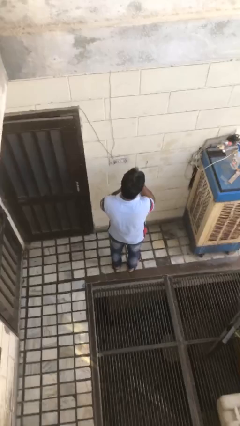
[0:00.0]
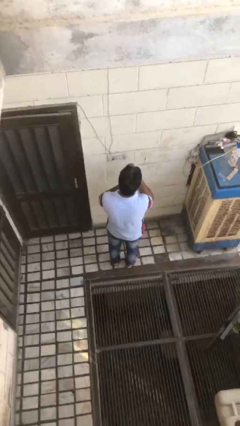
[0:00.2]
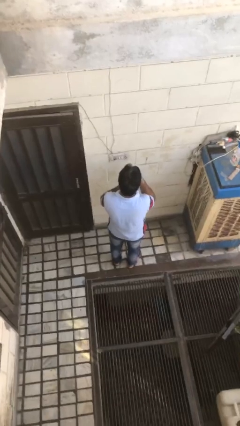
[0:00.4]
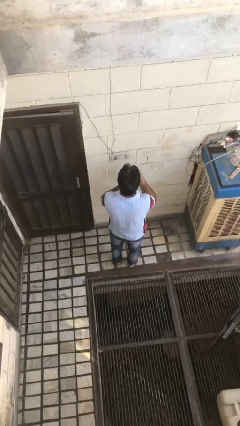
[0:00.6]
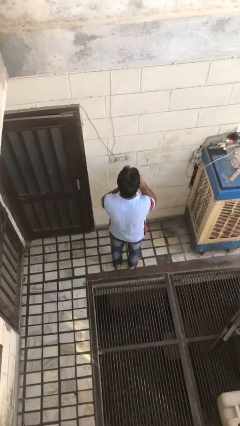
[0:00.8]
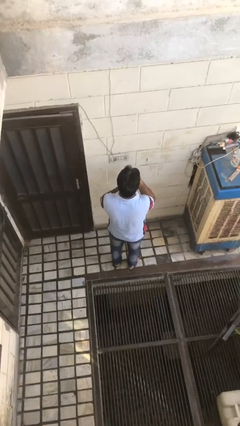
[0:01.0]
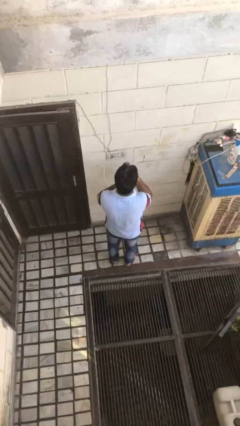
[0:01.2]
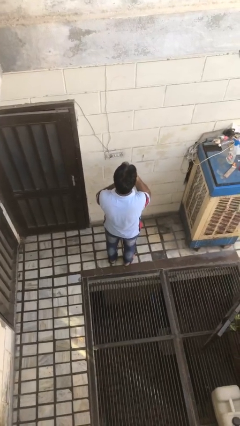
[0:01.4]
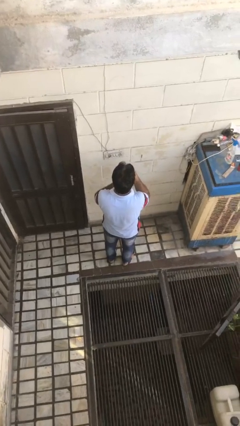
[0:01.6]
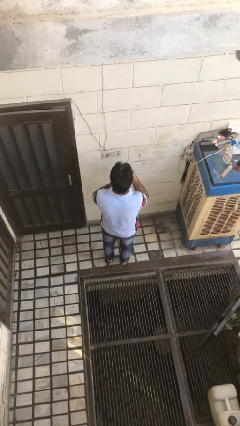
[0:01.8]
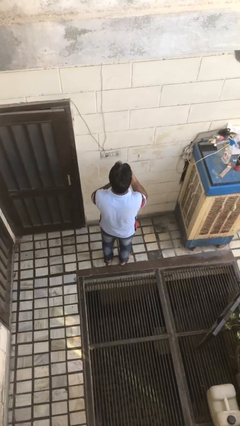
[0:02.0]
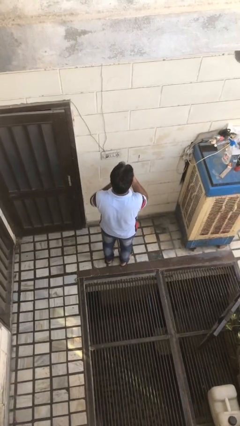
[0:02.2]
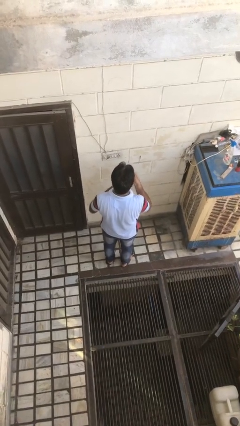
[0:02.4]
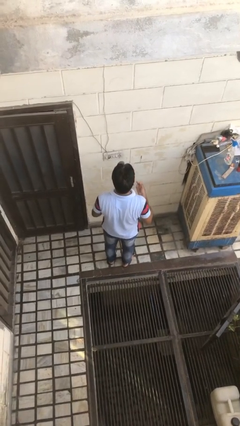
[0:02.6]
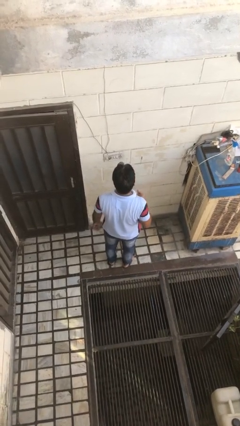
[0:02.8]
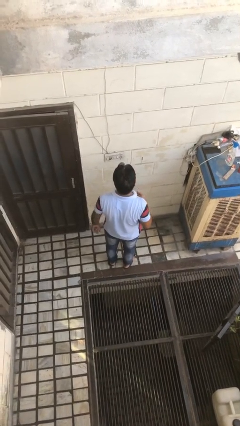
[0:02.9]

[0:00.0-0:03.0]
person applies lip makeup

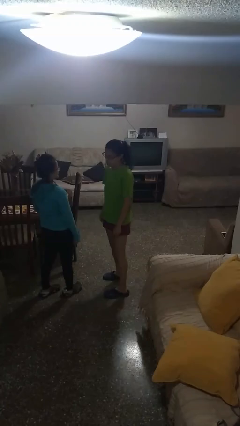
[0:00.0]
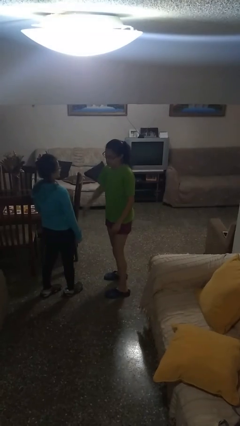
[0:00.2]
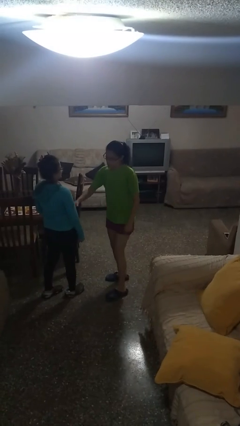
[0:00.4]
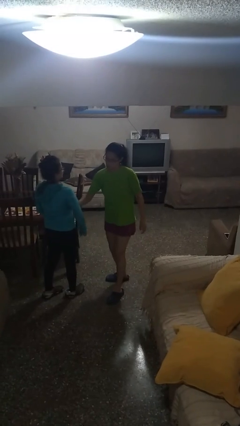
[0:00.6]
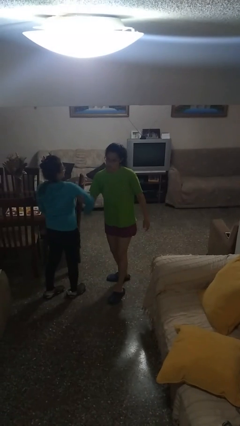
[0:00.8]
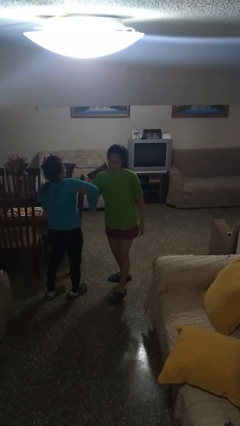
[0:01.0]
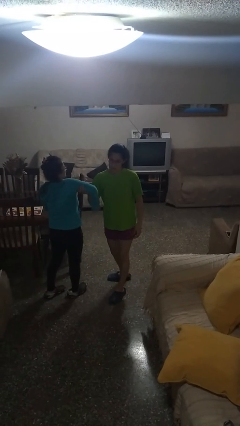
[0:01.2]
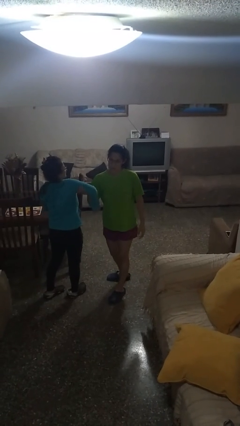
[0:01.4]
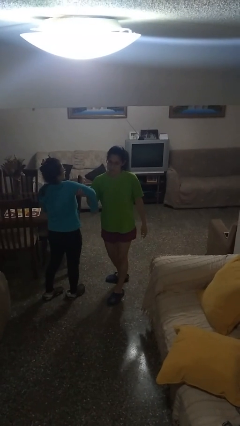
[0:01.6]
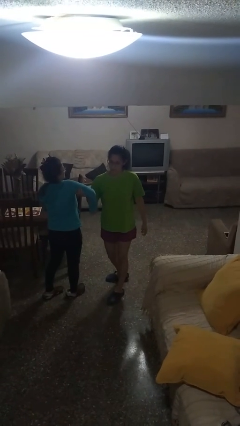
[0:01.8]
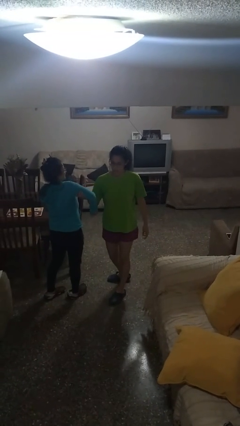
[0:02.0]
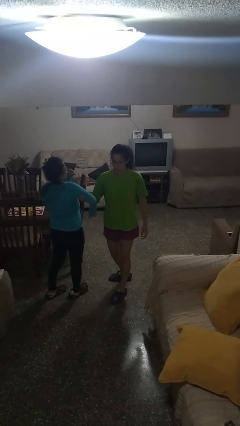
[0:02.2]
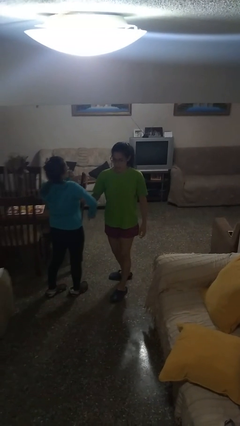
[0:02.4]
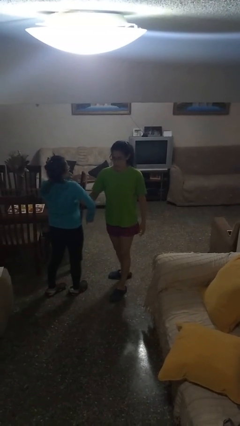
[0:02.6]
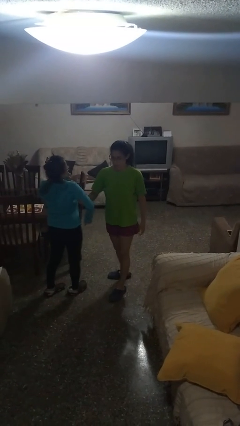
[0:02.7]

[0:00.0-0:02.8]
person grabs person by bicep

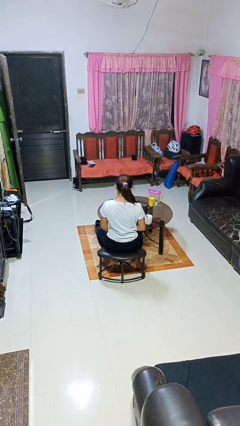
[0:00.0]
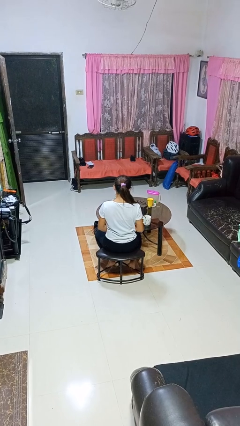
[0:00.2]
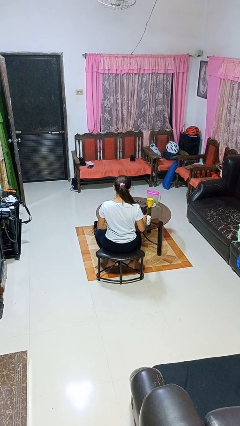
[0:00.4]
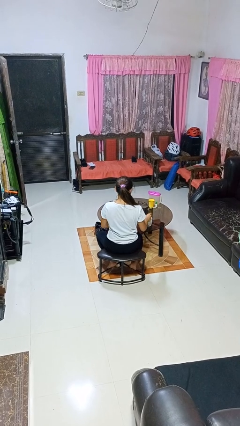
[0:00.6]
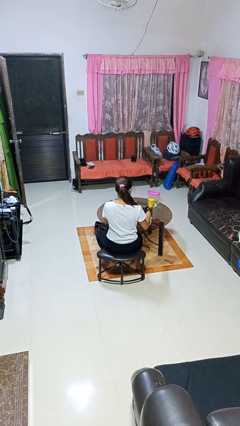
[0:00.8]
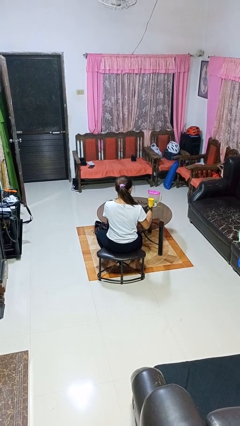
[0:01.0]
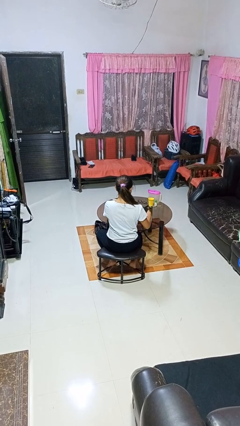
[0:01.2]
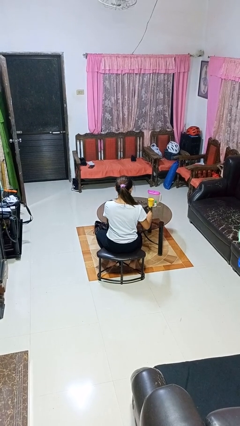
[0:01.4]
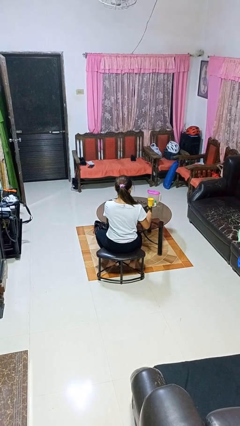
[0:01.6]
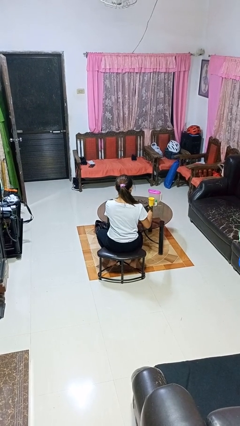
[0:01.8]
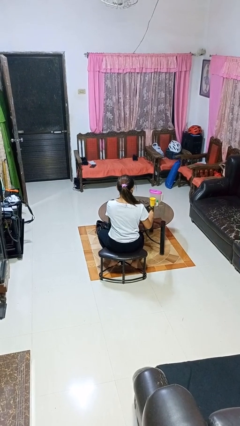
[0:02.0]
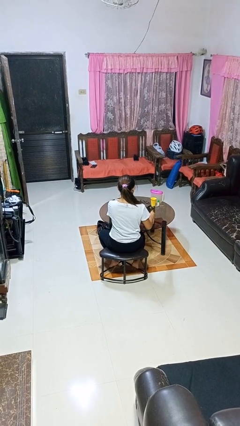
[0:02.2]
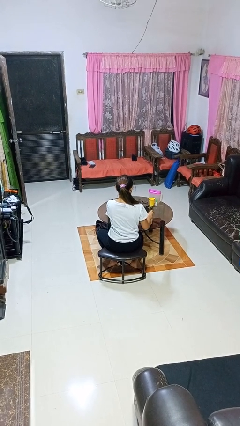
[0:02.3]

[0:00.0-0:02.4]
person stirs mug

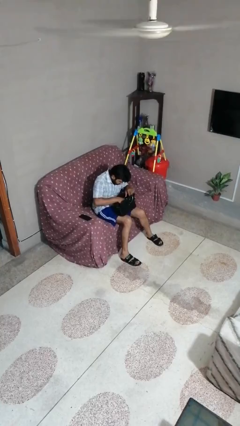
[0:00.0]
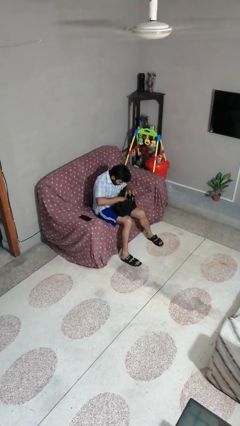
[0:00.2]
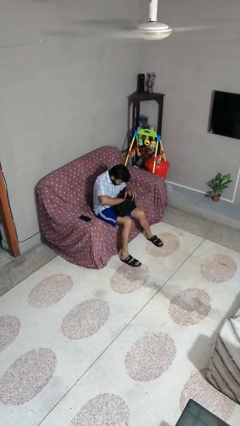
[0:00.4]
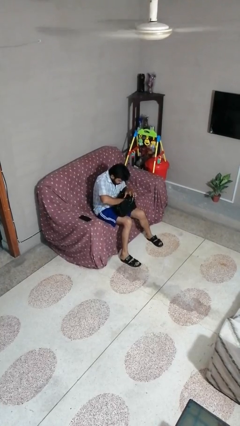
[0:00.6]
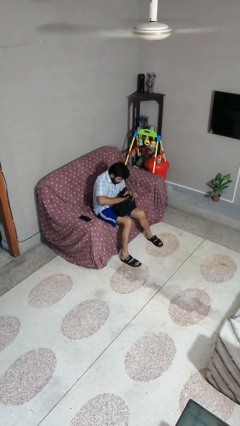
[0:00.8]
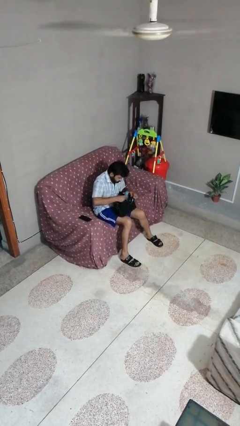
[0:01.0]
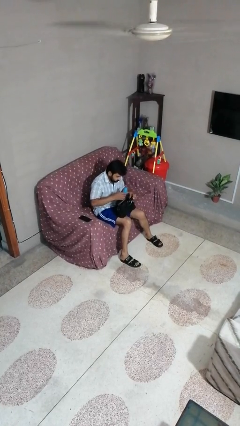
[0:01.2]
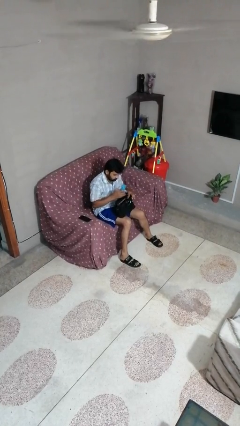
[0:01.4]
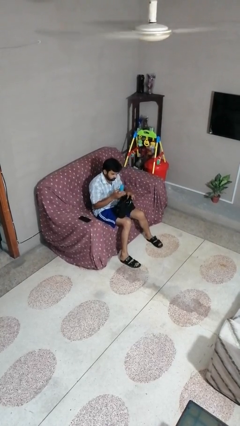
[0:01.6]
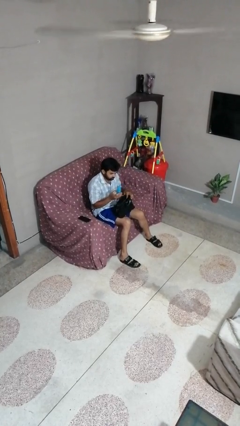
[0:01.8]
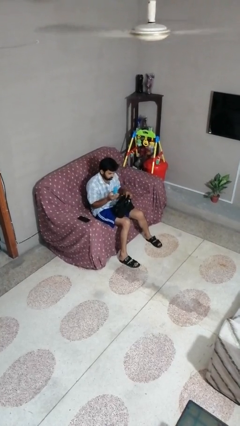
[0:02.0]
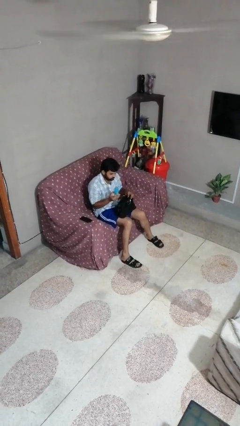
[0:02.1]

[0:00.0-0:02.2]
person takes object from purse

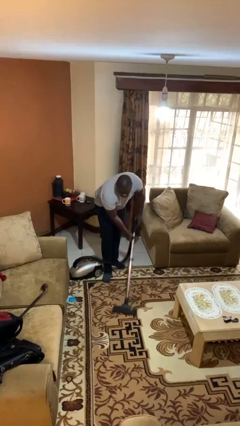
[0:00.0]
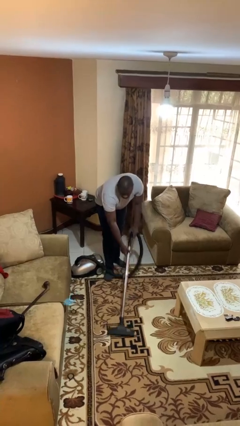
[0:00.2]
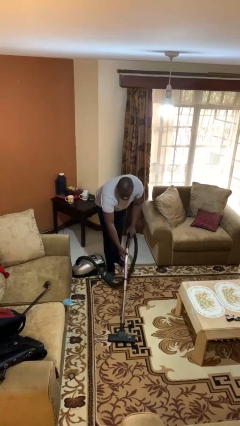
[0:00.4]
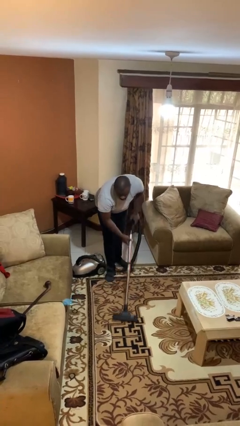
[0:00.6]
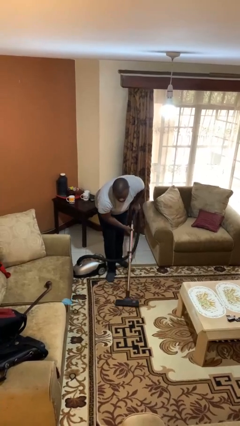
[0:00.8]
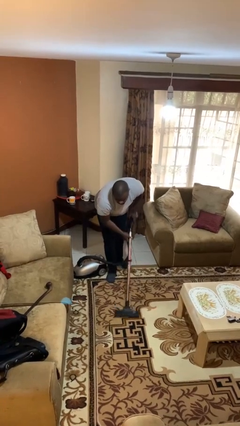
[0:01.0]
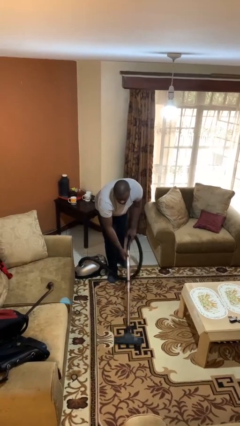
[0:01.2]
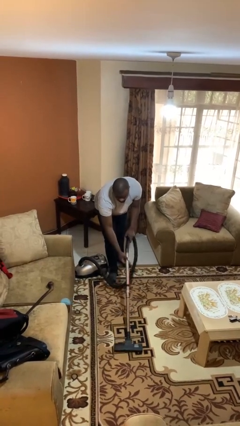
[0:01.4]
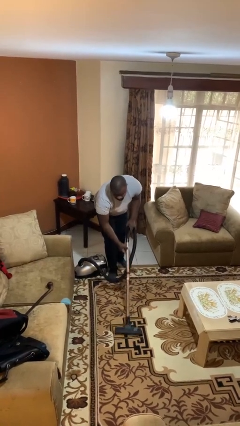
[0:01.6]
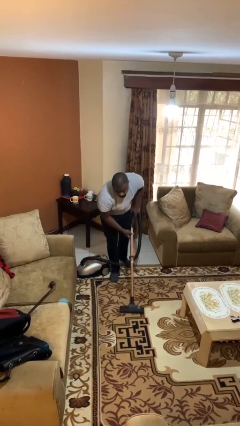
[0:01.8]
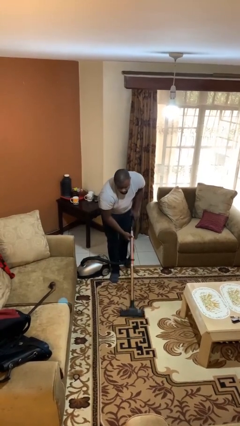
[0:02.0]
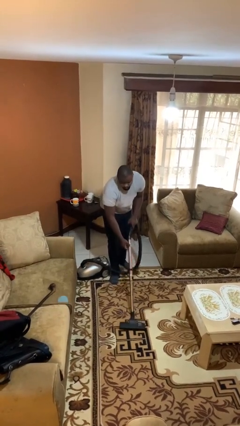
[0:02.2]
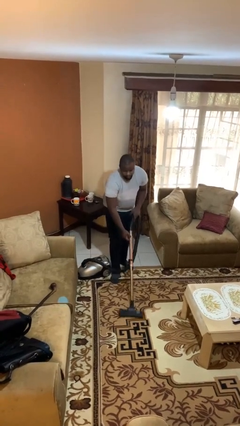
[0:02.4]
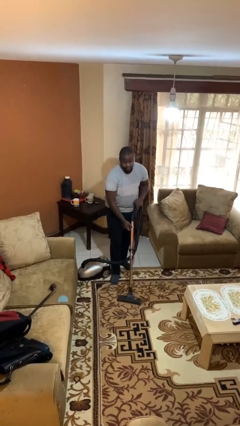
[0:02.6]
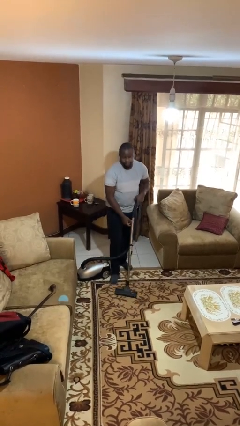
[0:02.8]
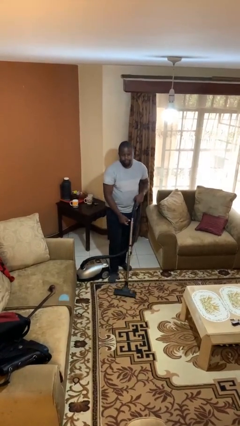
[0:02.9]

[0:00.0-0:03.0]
person vacuums carpet

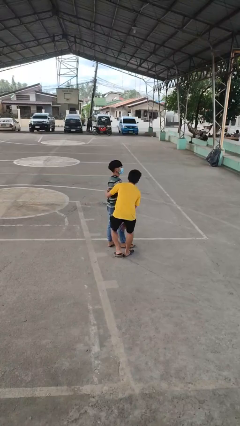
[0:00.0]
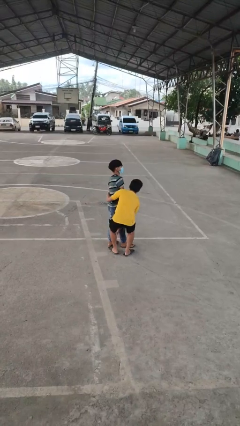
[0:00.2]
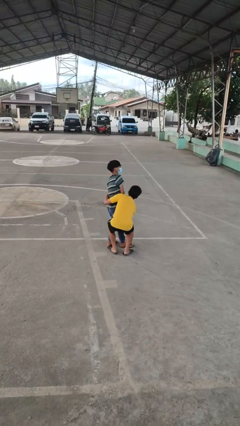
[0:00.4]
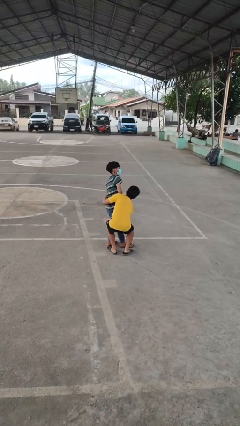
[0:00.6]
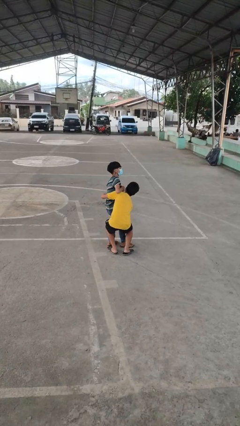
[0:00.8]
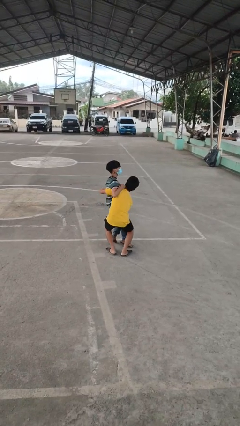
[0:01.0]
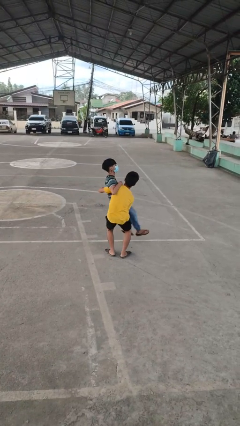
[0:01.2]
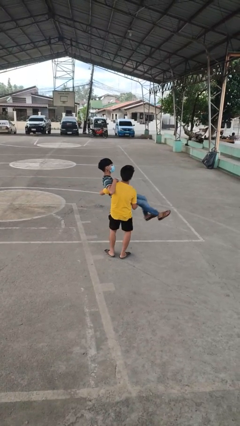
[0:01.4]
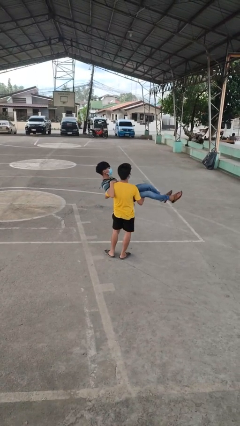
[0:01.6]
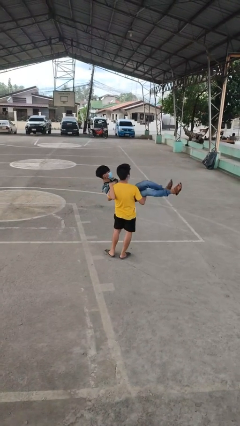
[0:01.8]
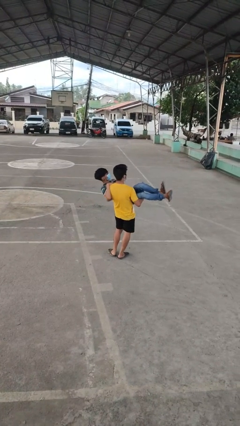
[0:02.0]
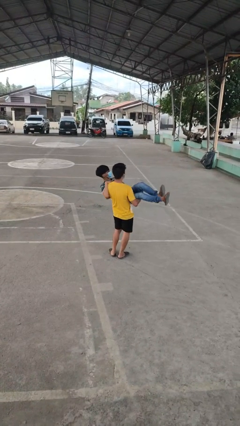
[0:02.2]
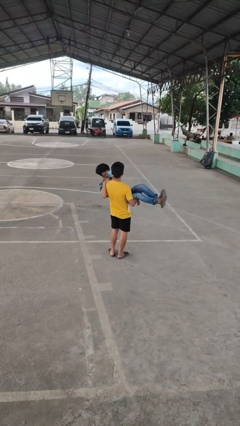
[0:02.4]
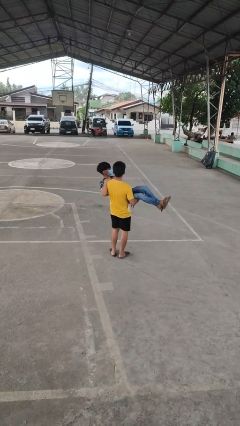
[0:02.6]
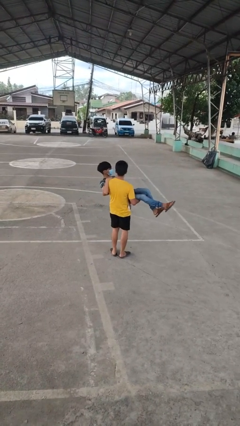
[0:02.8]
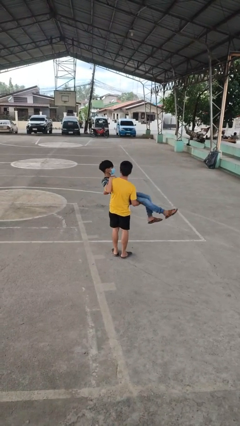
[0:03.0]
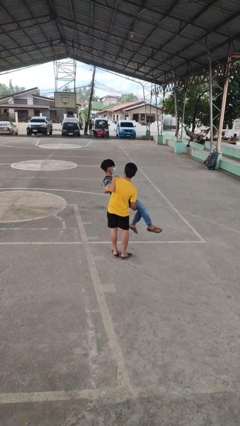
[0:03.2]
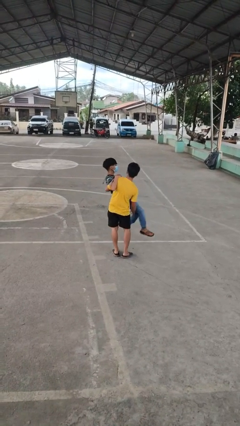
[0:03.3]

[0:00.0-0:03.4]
person picks up person
